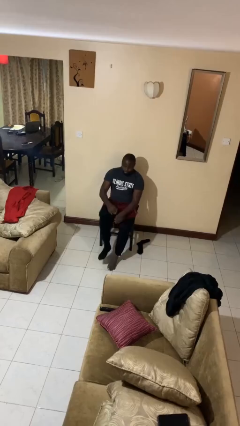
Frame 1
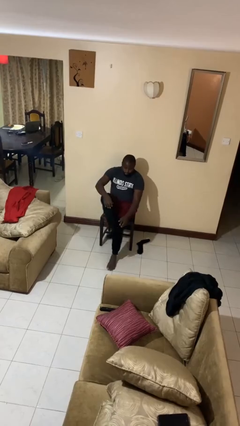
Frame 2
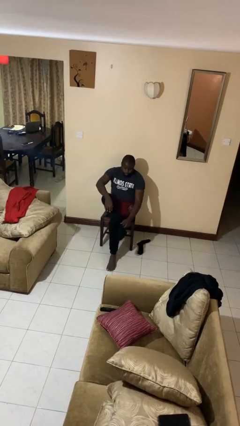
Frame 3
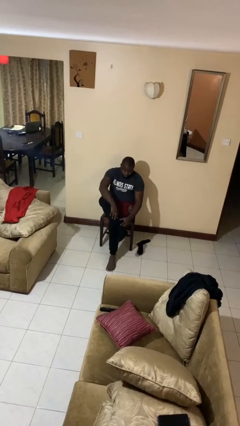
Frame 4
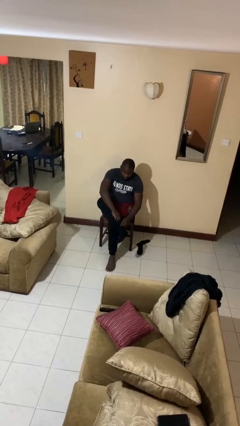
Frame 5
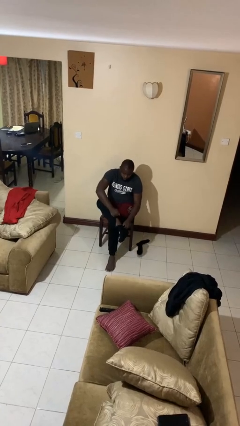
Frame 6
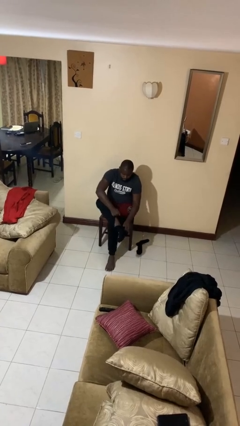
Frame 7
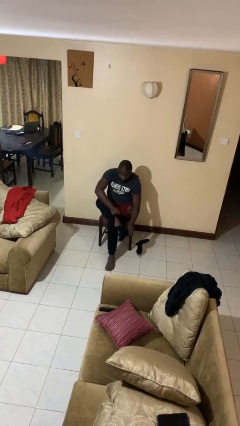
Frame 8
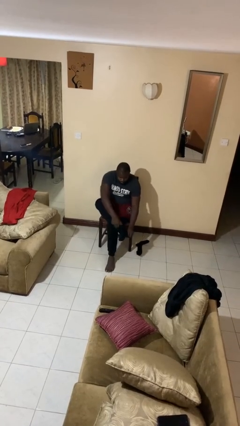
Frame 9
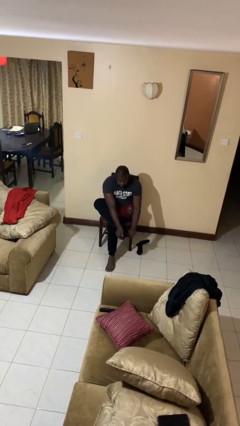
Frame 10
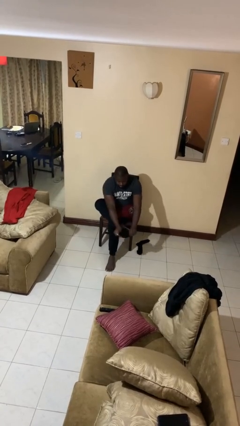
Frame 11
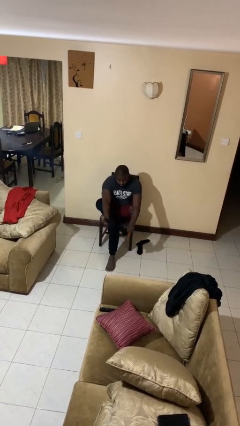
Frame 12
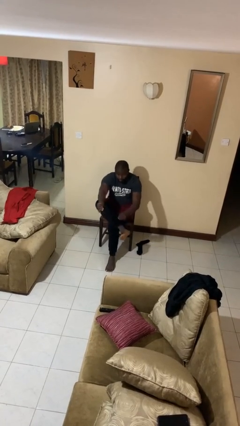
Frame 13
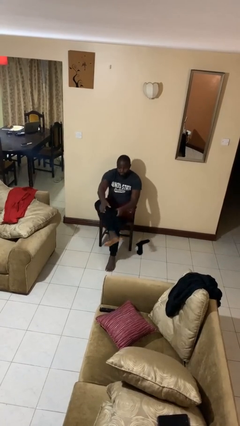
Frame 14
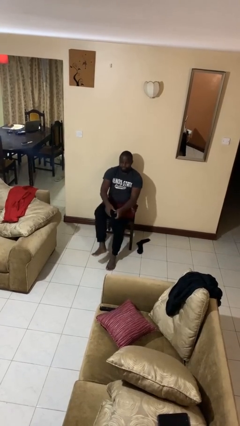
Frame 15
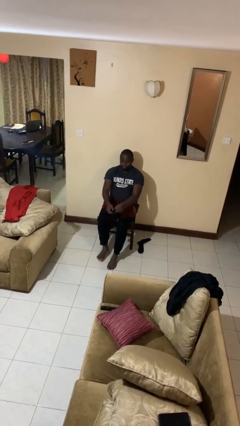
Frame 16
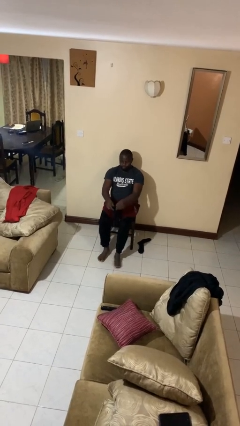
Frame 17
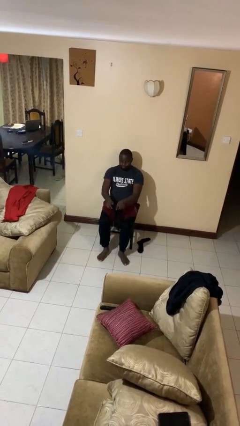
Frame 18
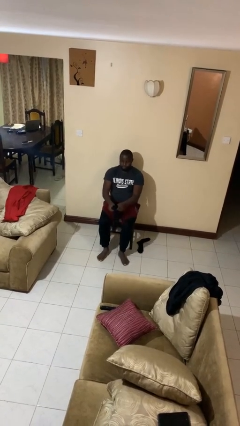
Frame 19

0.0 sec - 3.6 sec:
person takes off socks

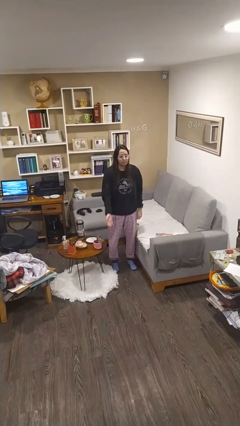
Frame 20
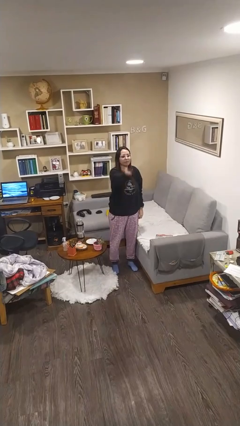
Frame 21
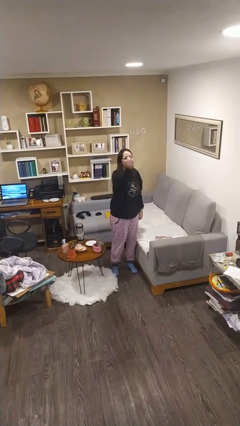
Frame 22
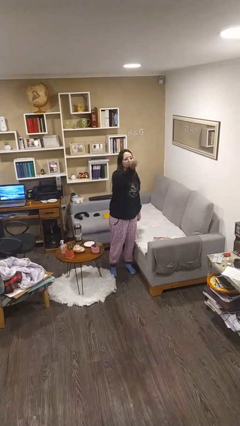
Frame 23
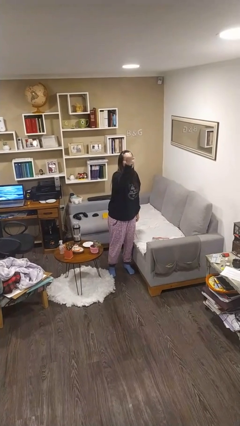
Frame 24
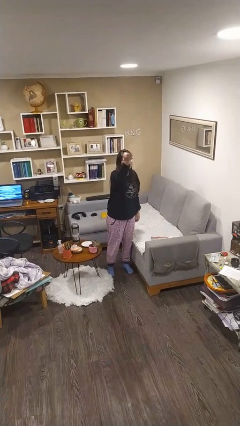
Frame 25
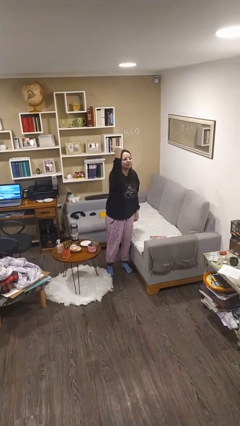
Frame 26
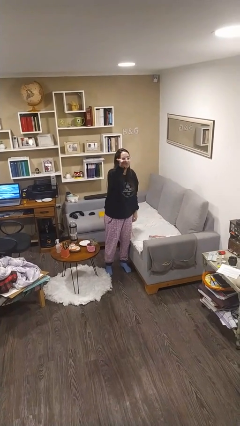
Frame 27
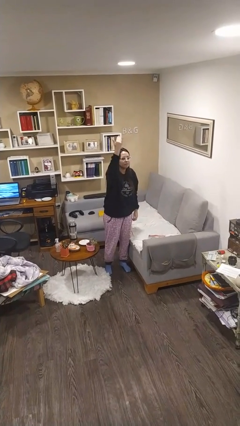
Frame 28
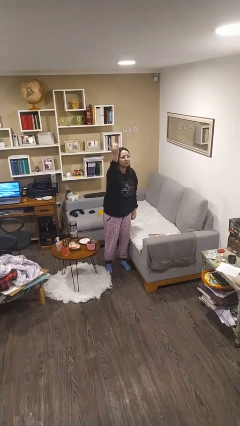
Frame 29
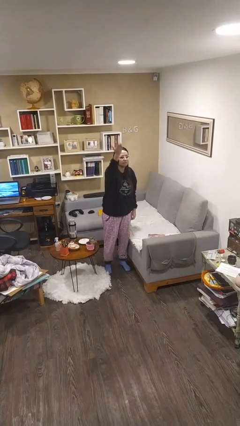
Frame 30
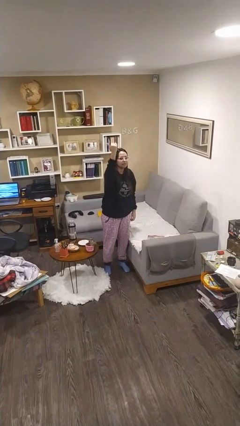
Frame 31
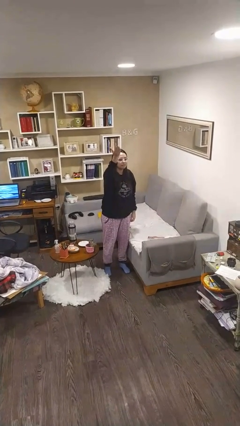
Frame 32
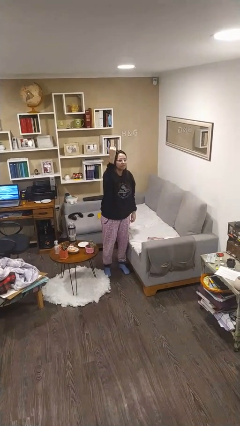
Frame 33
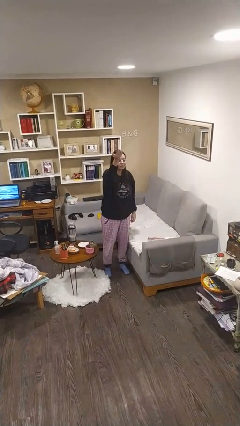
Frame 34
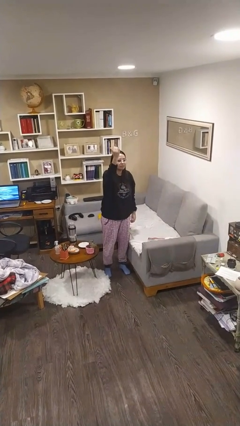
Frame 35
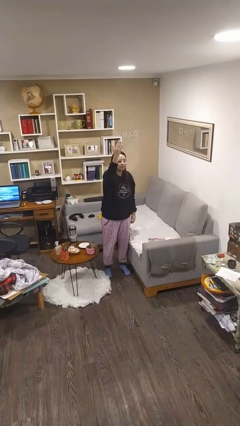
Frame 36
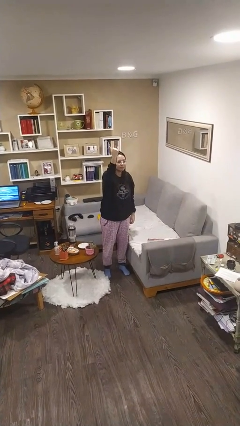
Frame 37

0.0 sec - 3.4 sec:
person gestures come here

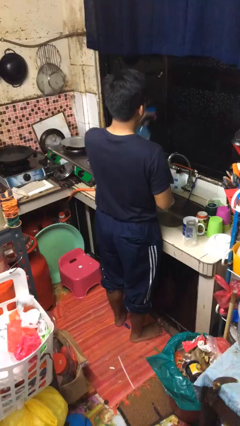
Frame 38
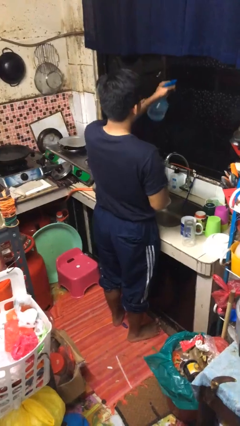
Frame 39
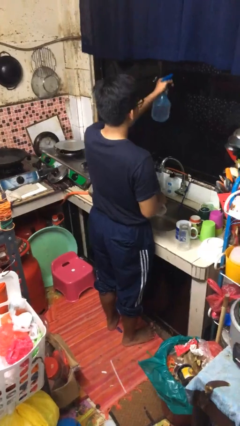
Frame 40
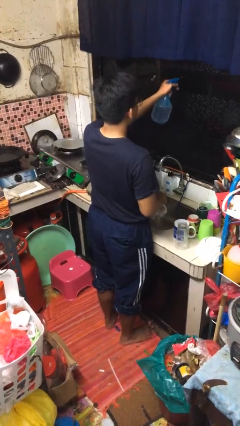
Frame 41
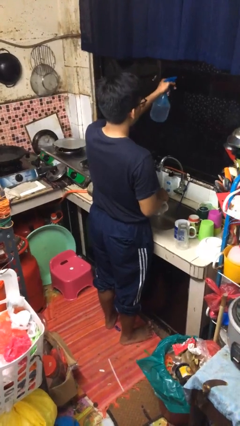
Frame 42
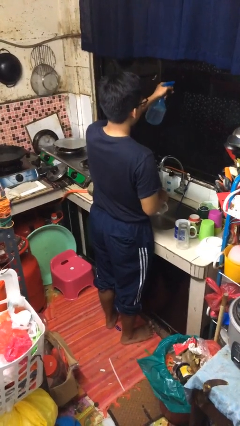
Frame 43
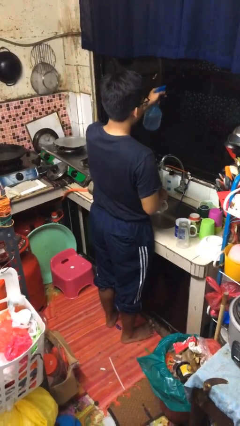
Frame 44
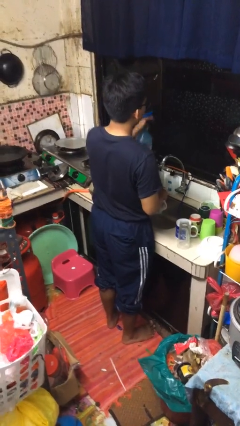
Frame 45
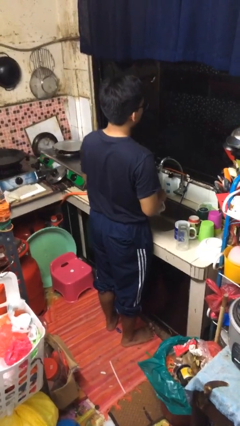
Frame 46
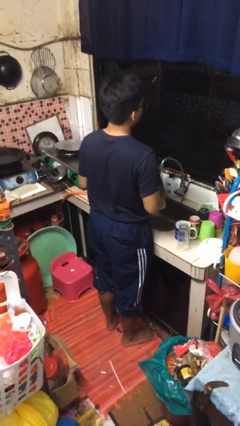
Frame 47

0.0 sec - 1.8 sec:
person sprays from bottle

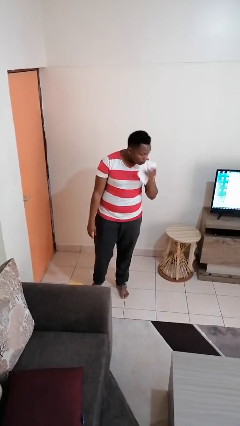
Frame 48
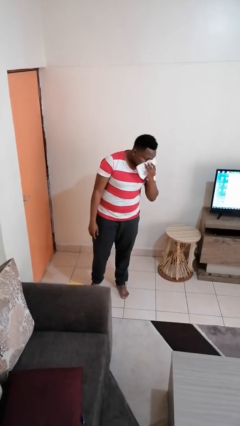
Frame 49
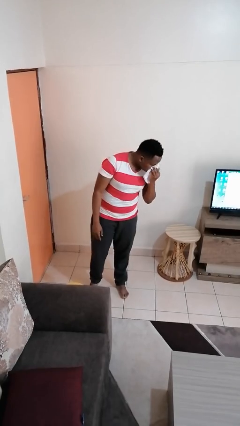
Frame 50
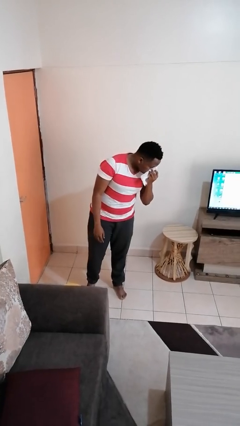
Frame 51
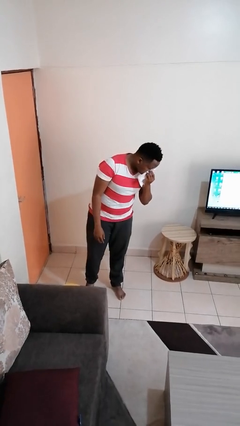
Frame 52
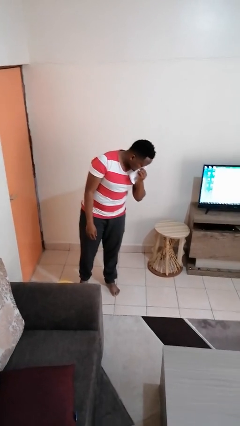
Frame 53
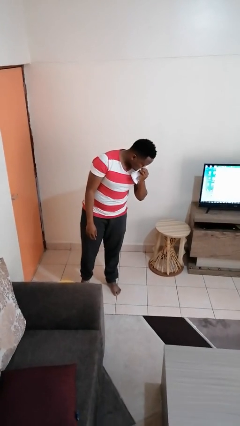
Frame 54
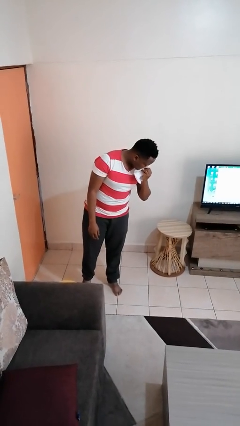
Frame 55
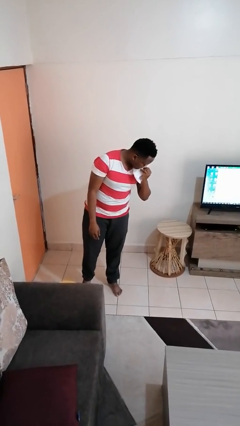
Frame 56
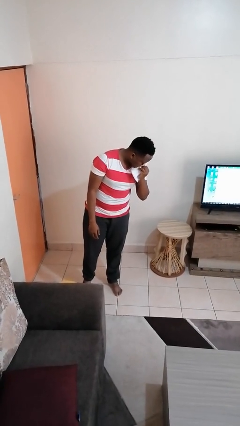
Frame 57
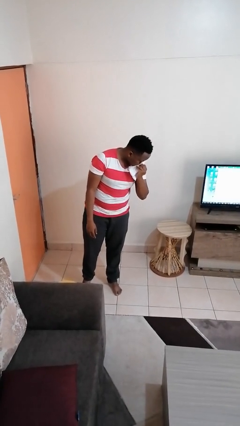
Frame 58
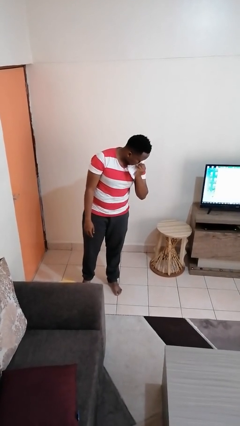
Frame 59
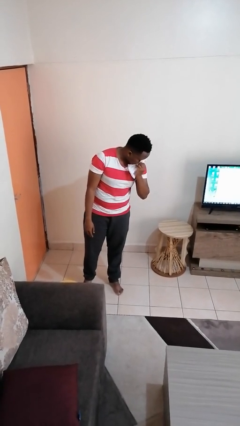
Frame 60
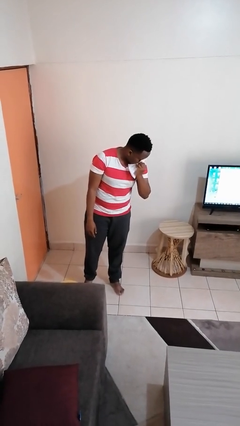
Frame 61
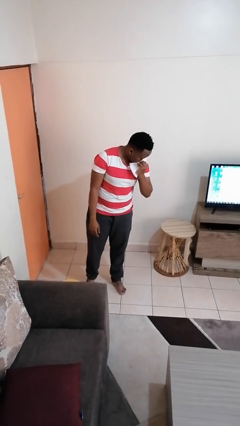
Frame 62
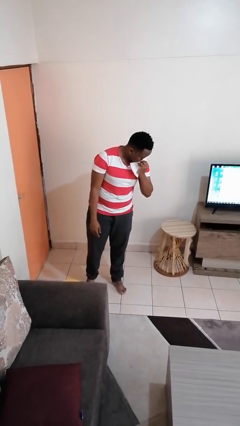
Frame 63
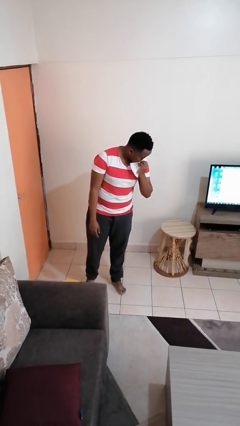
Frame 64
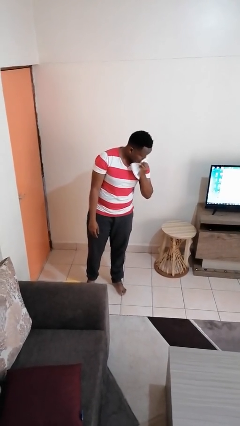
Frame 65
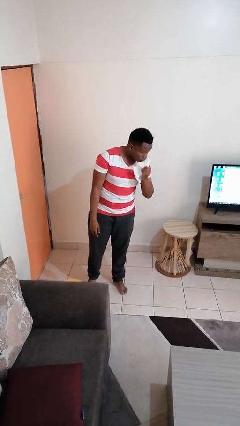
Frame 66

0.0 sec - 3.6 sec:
person blows nose

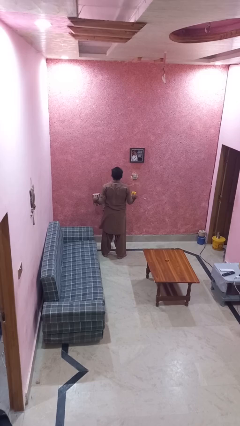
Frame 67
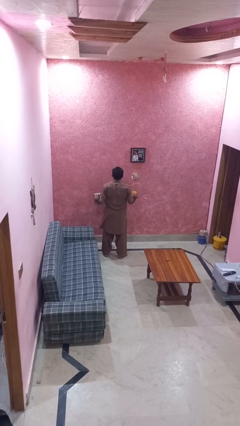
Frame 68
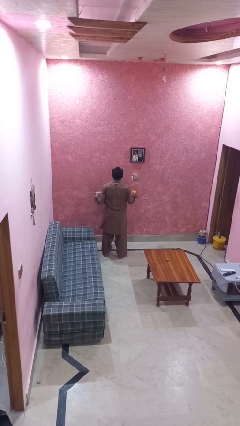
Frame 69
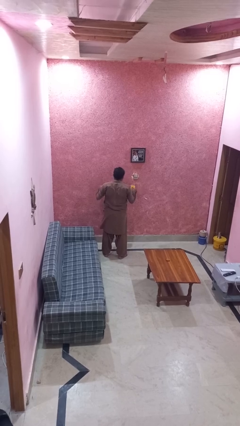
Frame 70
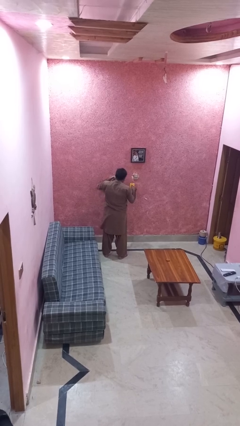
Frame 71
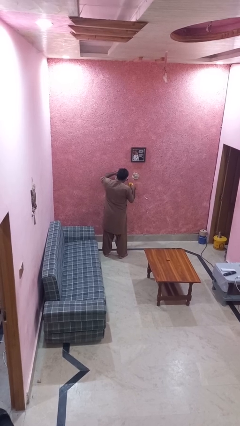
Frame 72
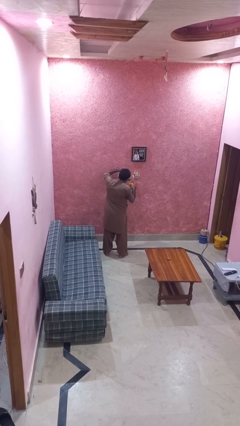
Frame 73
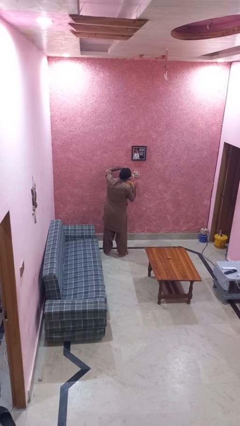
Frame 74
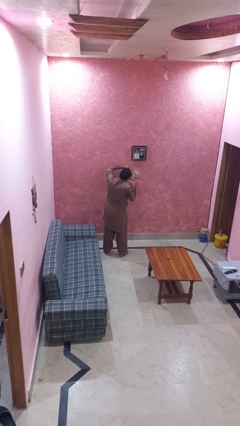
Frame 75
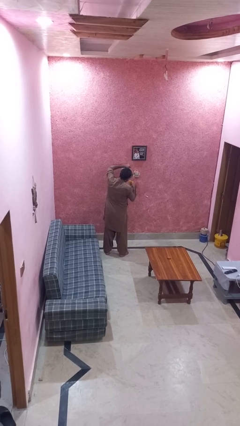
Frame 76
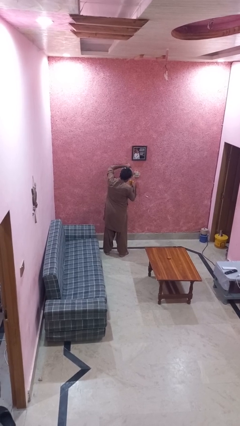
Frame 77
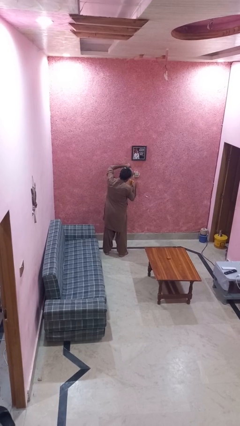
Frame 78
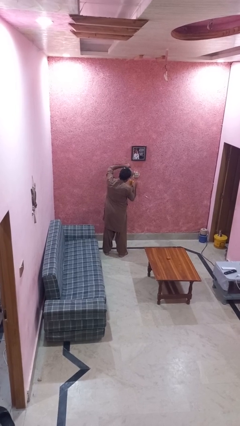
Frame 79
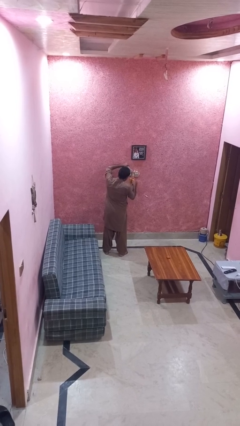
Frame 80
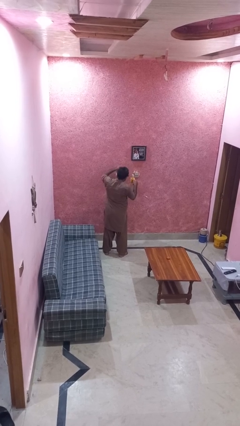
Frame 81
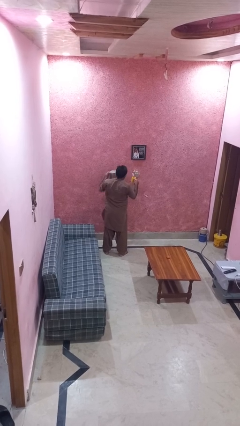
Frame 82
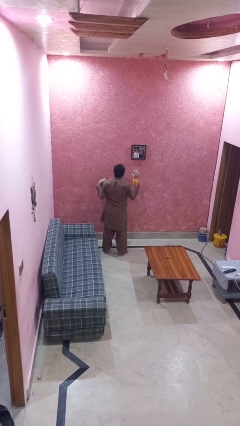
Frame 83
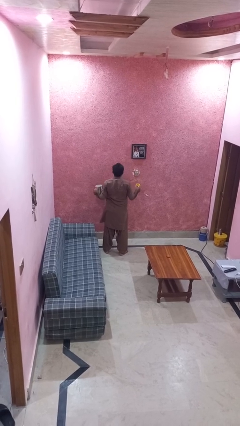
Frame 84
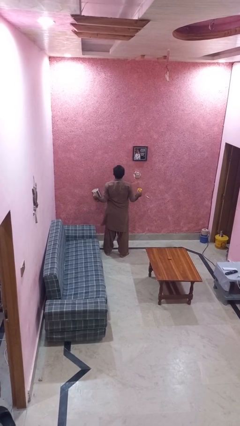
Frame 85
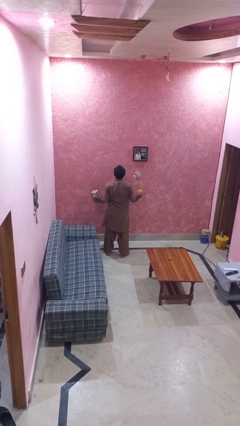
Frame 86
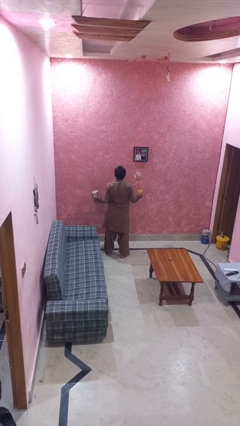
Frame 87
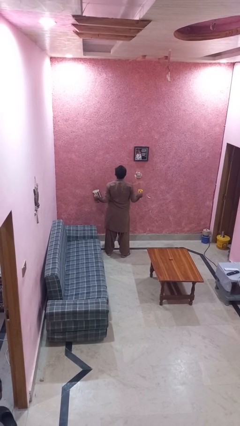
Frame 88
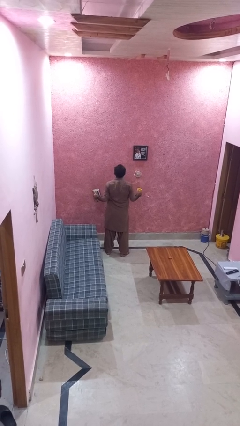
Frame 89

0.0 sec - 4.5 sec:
person pours coffee into mug

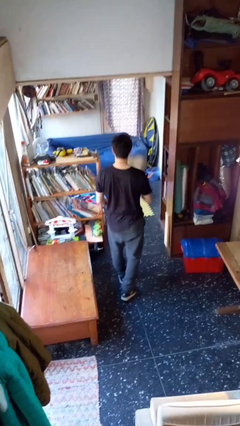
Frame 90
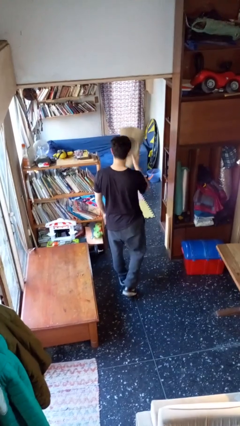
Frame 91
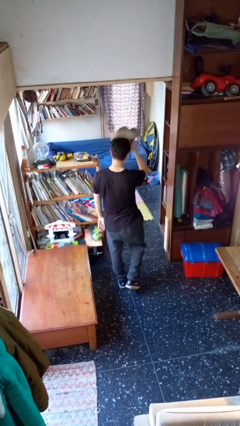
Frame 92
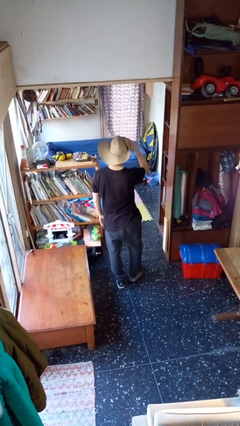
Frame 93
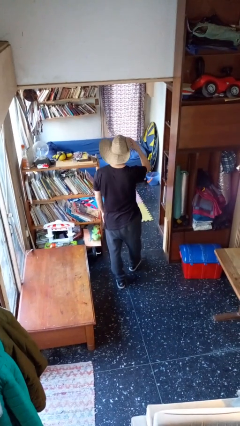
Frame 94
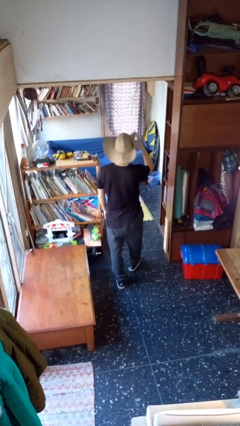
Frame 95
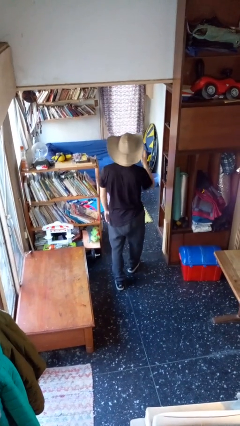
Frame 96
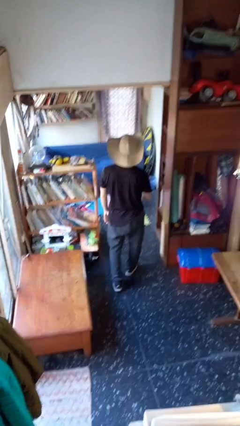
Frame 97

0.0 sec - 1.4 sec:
person puts on hat
